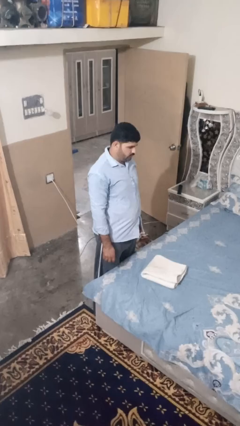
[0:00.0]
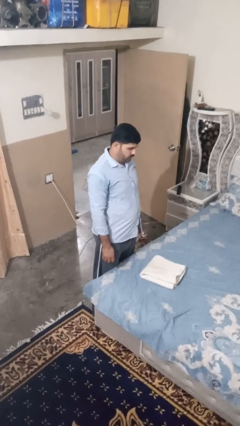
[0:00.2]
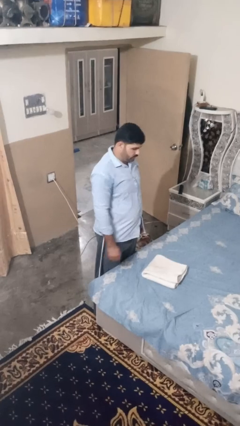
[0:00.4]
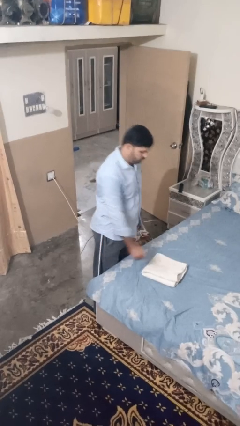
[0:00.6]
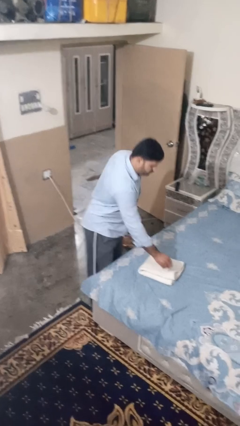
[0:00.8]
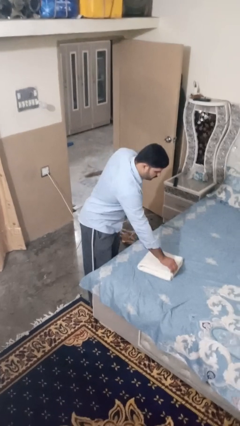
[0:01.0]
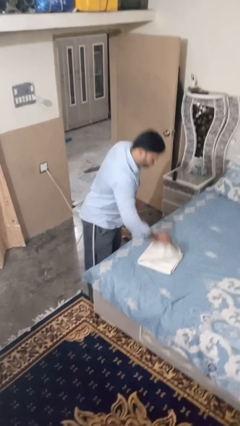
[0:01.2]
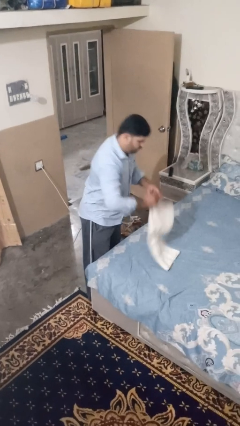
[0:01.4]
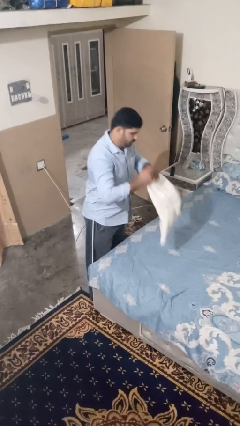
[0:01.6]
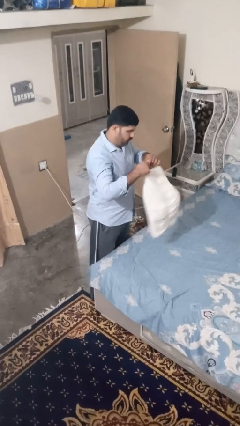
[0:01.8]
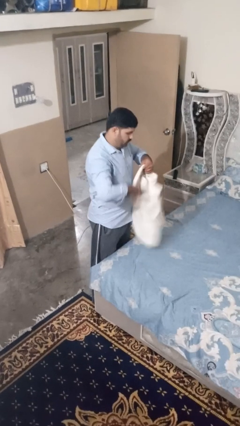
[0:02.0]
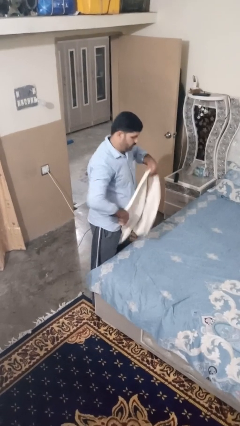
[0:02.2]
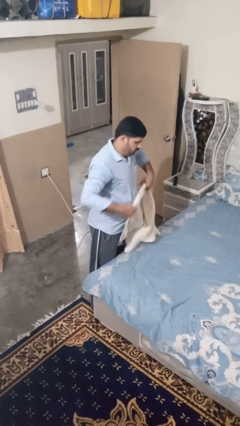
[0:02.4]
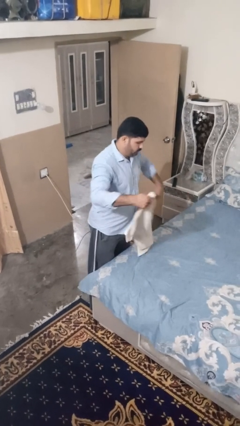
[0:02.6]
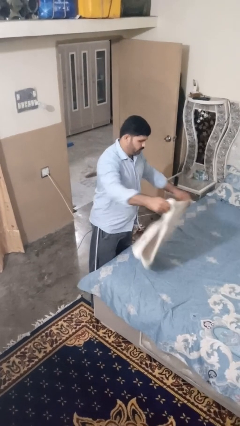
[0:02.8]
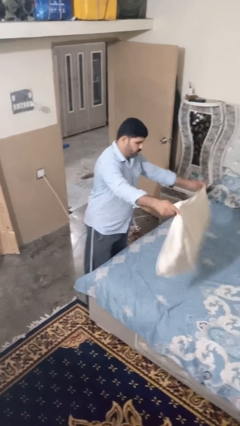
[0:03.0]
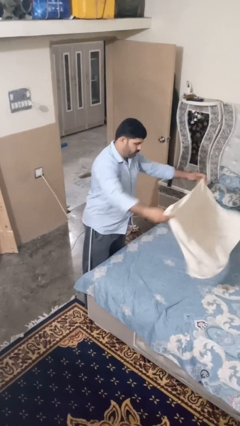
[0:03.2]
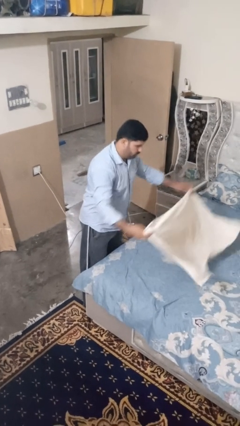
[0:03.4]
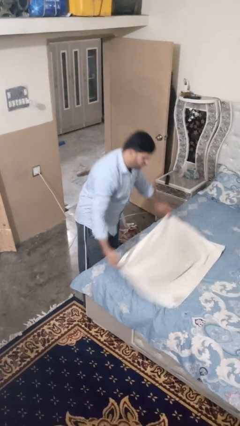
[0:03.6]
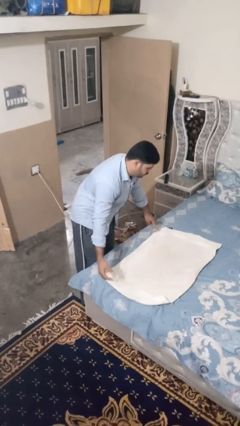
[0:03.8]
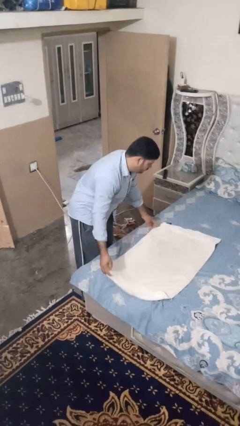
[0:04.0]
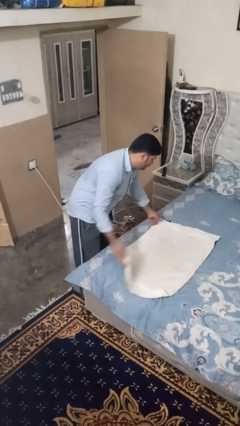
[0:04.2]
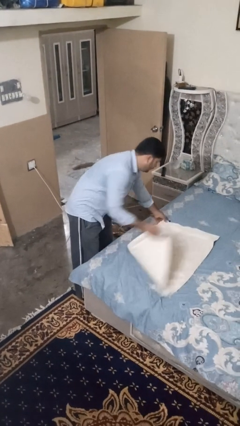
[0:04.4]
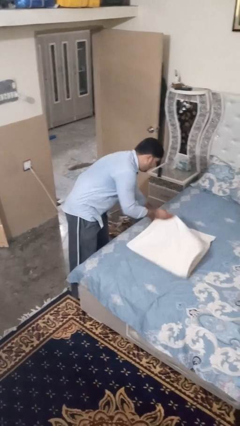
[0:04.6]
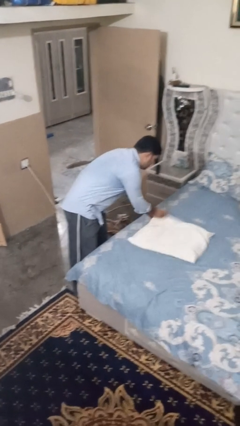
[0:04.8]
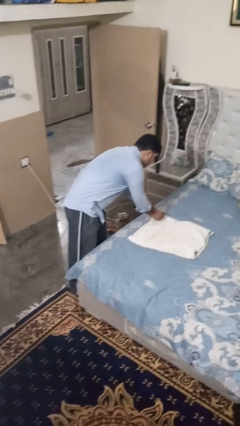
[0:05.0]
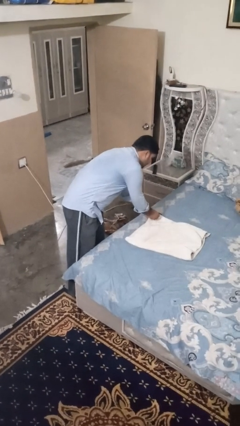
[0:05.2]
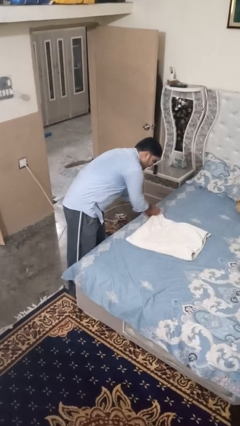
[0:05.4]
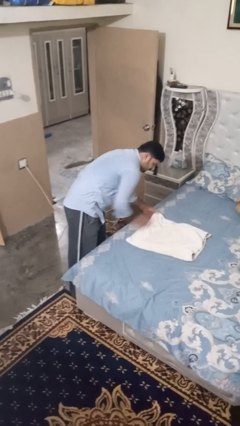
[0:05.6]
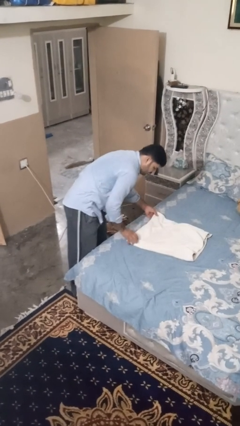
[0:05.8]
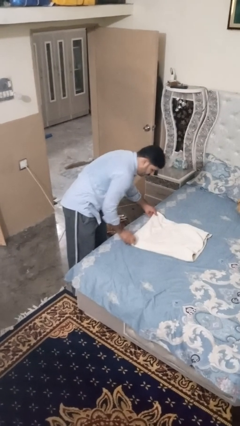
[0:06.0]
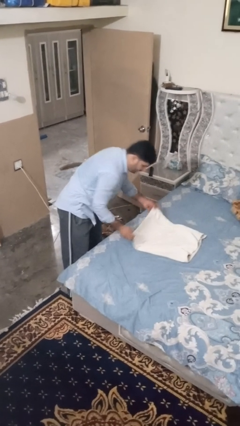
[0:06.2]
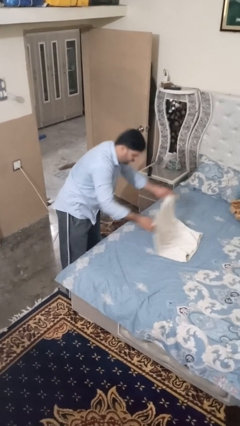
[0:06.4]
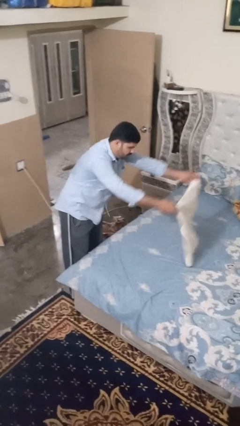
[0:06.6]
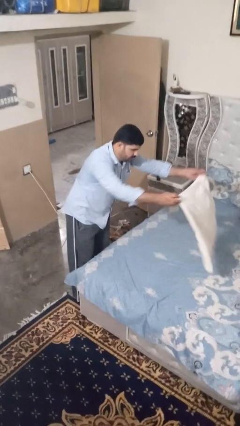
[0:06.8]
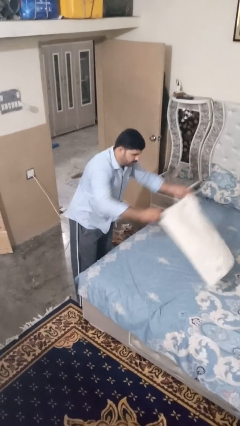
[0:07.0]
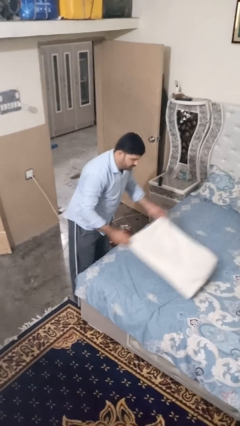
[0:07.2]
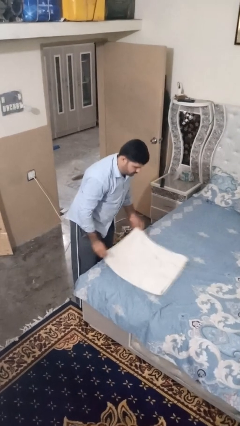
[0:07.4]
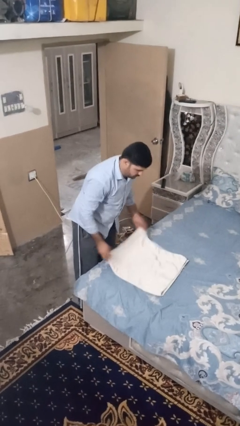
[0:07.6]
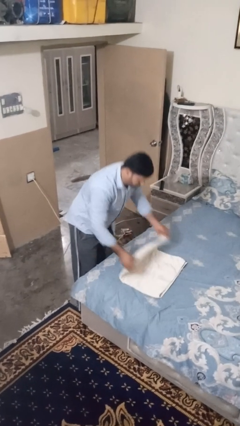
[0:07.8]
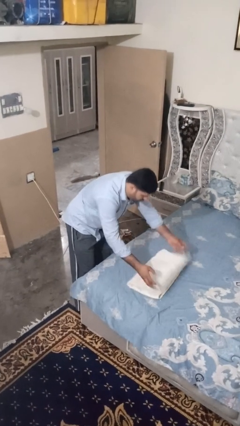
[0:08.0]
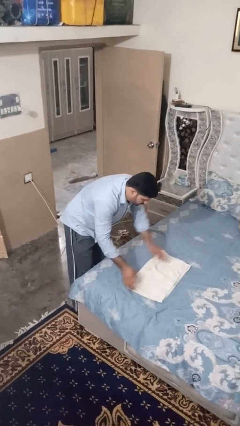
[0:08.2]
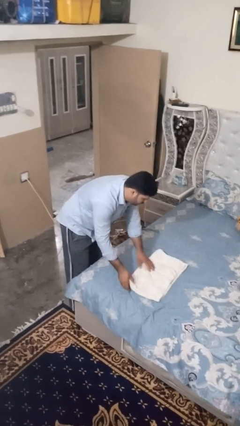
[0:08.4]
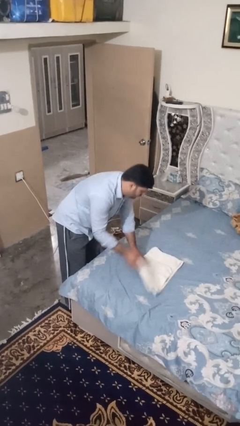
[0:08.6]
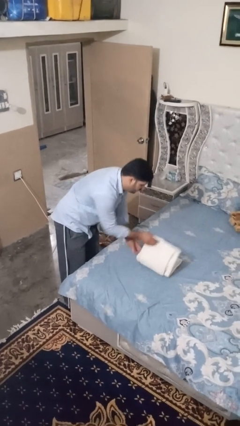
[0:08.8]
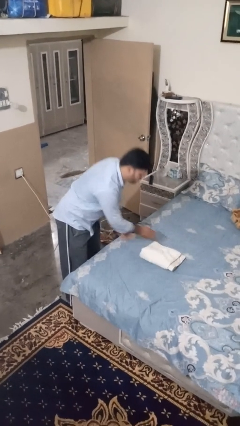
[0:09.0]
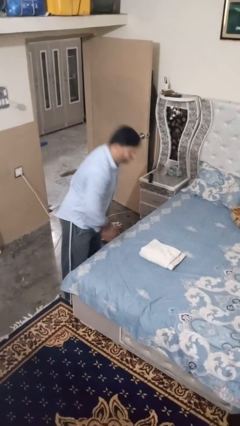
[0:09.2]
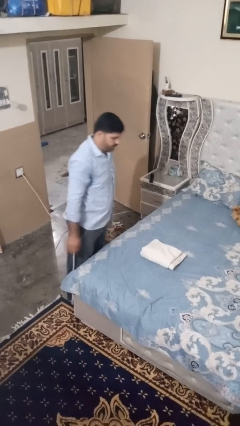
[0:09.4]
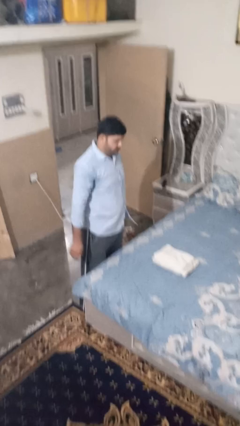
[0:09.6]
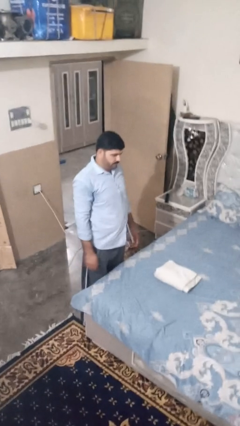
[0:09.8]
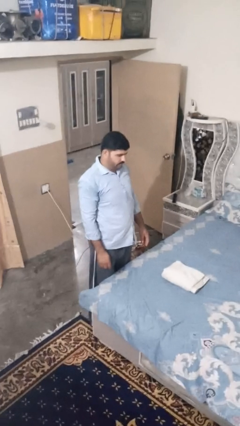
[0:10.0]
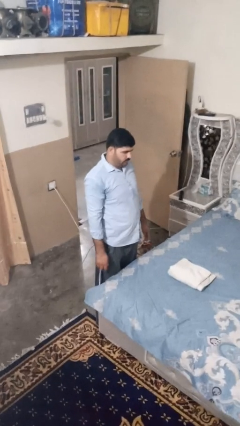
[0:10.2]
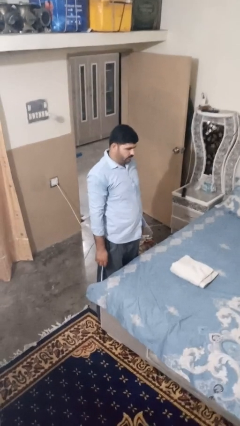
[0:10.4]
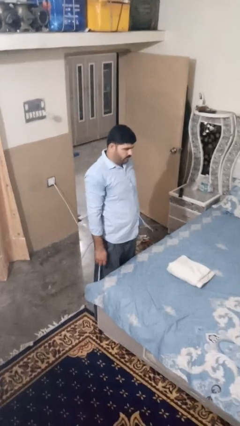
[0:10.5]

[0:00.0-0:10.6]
person folds towel

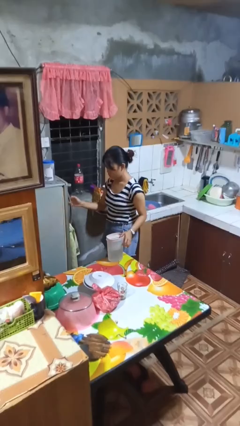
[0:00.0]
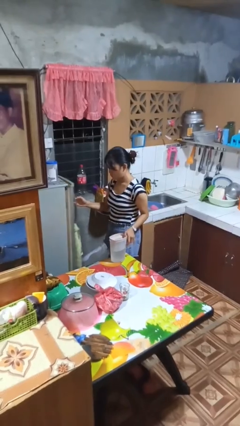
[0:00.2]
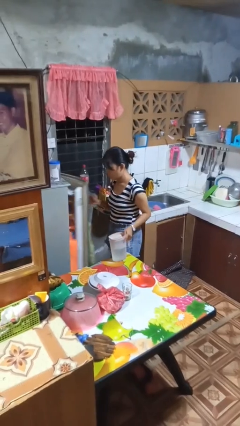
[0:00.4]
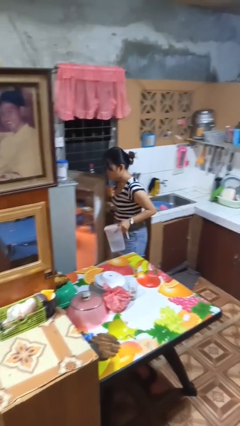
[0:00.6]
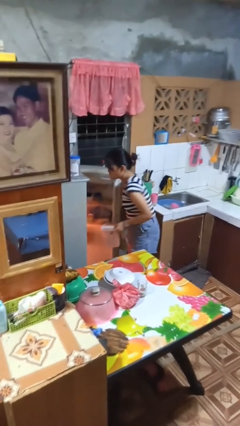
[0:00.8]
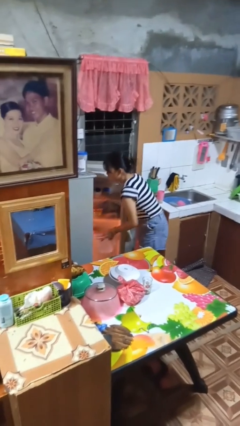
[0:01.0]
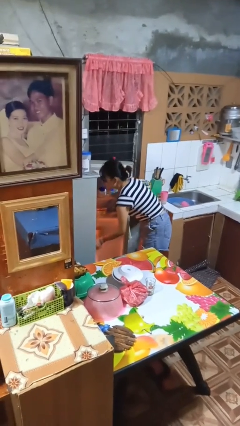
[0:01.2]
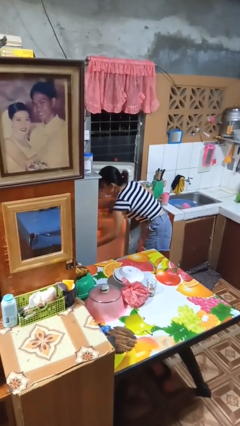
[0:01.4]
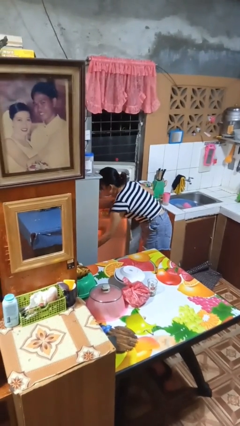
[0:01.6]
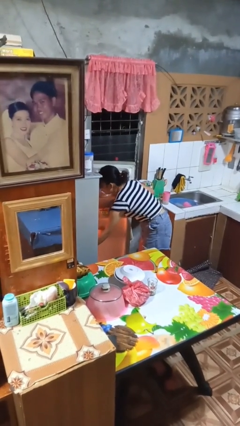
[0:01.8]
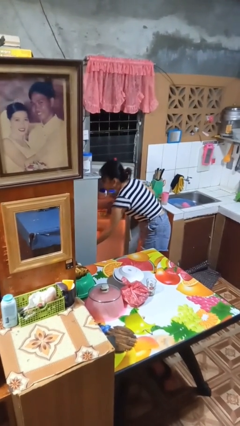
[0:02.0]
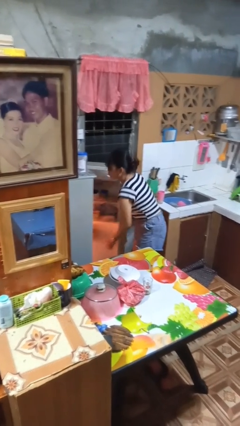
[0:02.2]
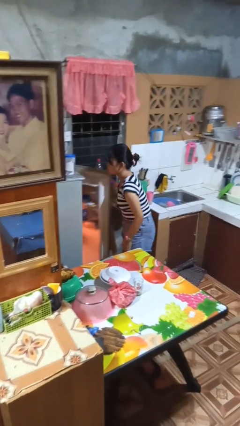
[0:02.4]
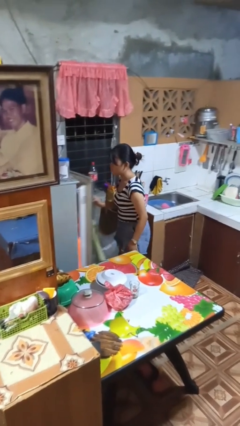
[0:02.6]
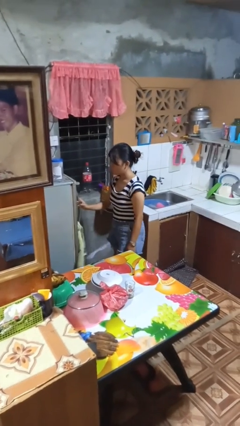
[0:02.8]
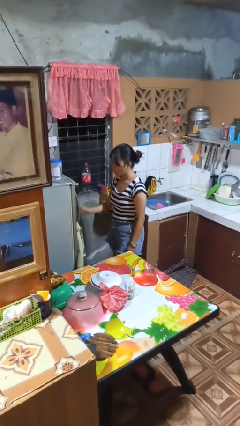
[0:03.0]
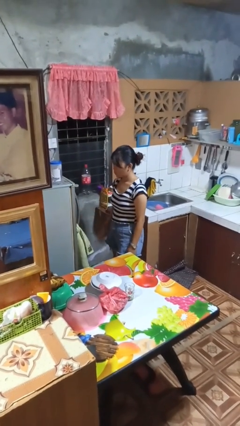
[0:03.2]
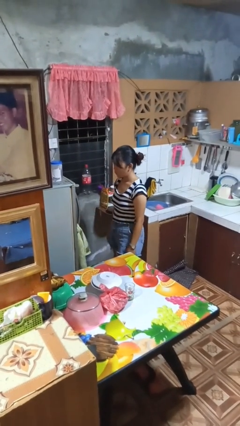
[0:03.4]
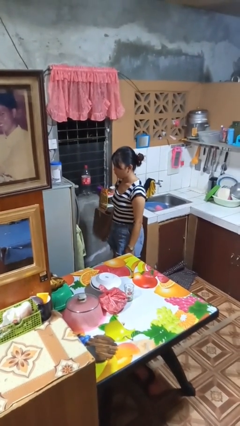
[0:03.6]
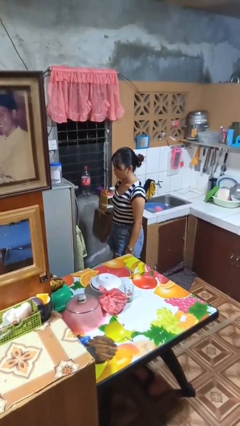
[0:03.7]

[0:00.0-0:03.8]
person puts object into refrigerator

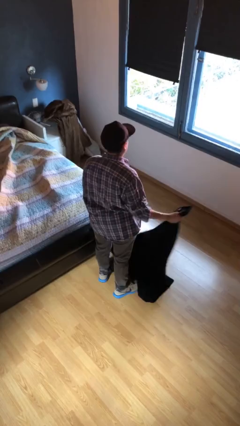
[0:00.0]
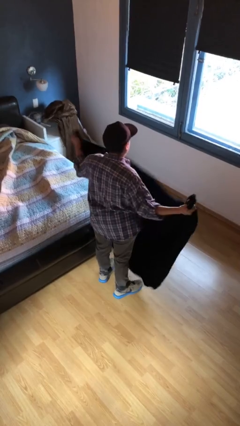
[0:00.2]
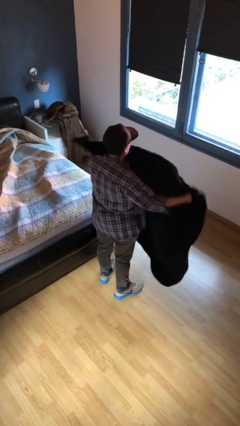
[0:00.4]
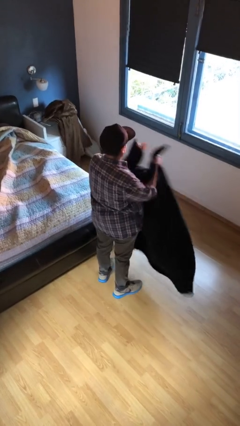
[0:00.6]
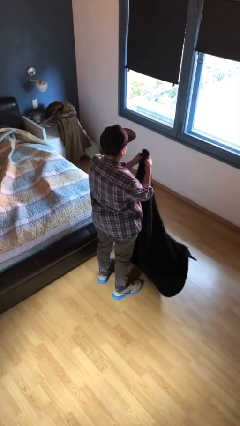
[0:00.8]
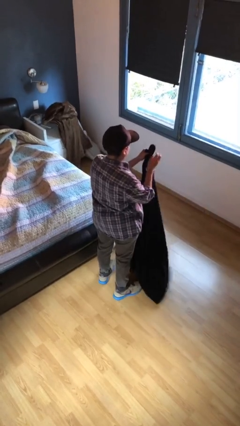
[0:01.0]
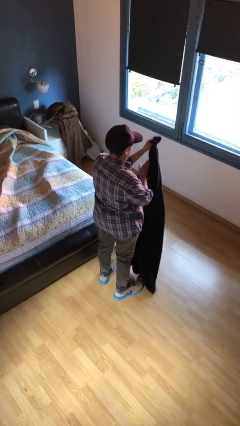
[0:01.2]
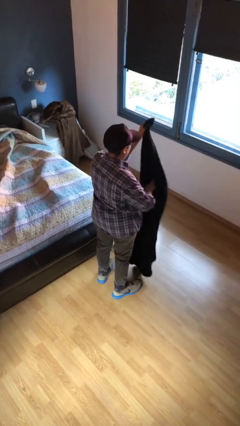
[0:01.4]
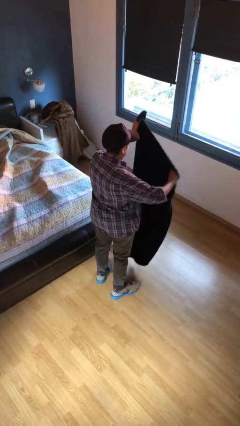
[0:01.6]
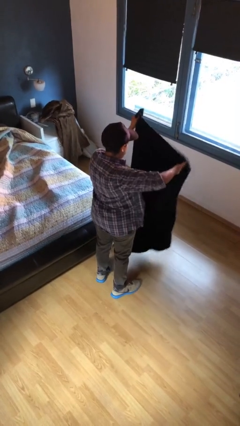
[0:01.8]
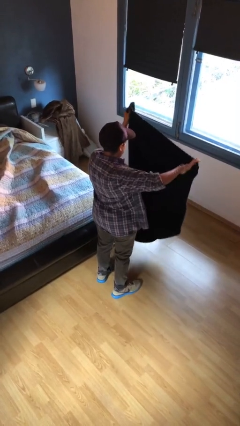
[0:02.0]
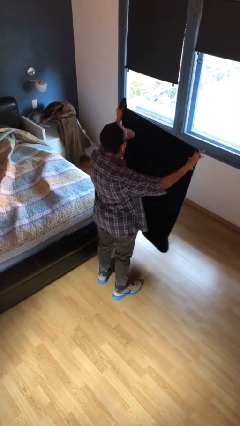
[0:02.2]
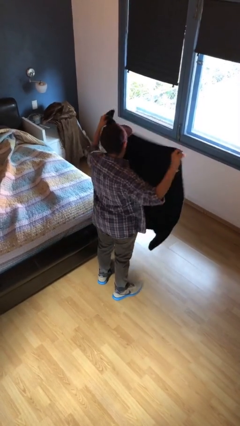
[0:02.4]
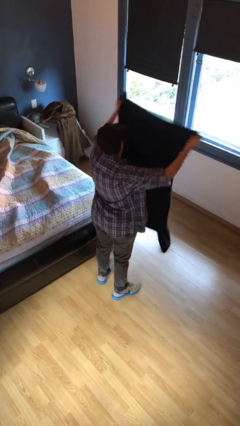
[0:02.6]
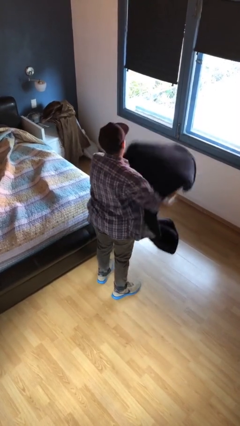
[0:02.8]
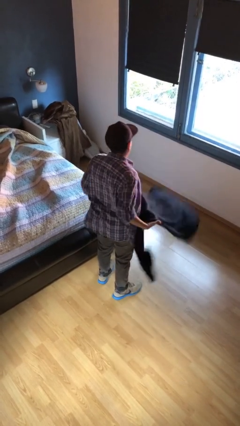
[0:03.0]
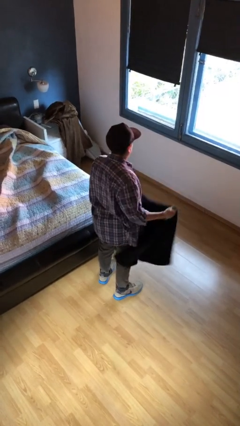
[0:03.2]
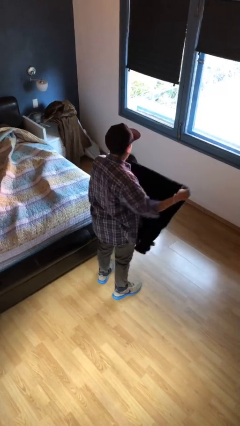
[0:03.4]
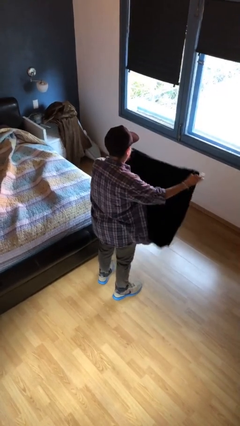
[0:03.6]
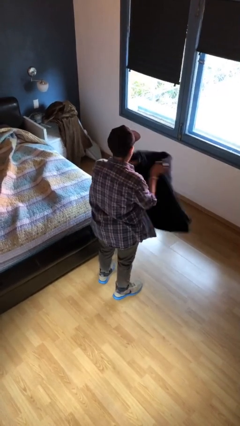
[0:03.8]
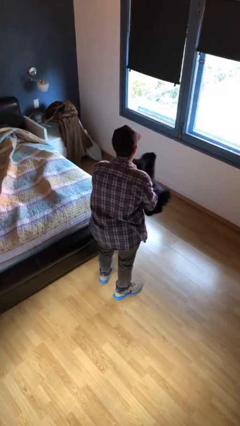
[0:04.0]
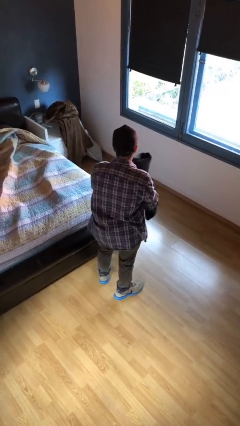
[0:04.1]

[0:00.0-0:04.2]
person folds blanket
